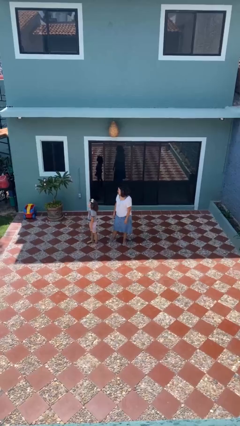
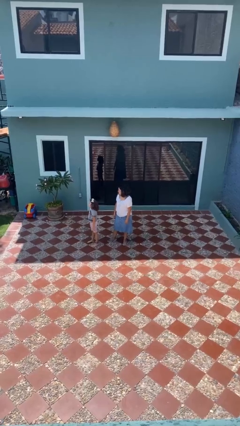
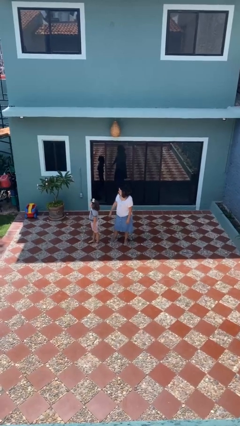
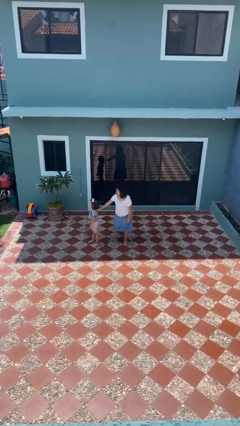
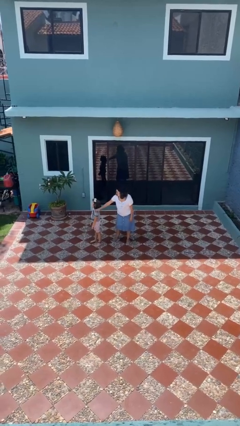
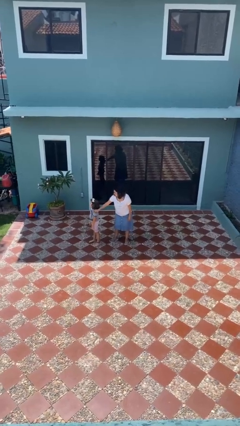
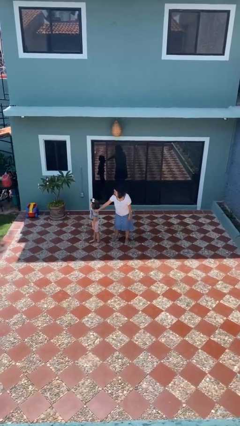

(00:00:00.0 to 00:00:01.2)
person grabs person by shoulder

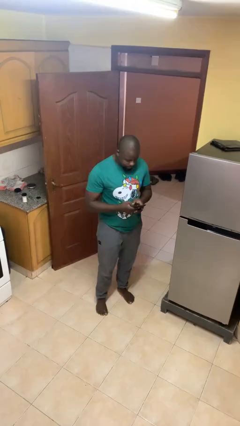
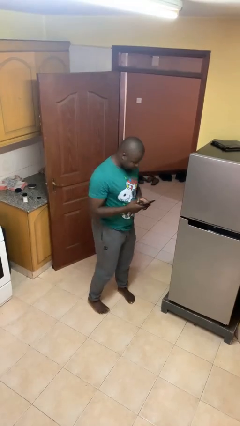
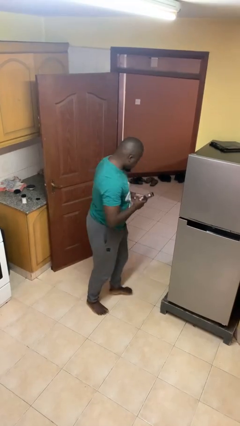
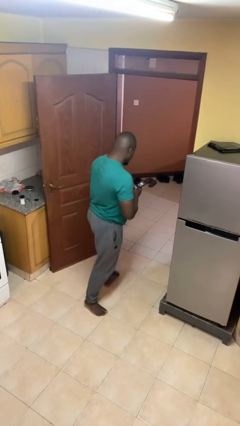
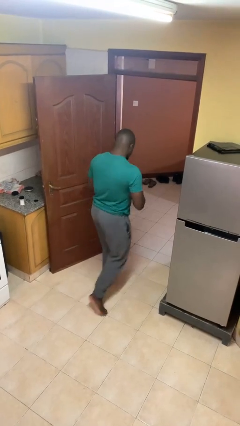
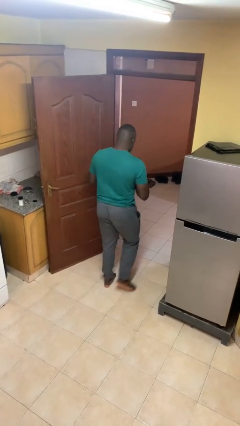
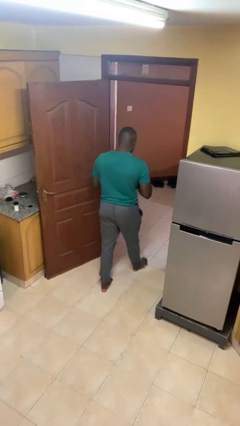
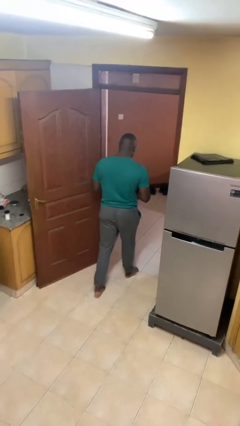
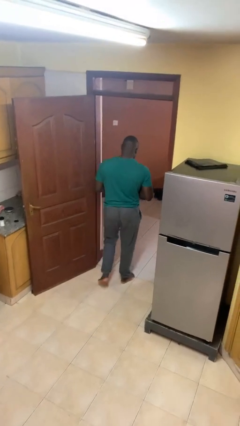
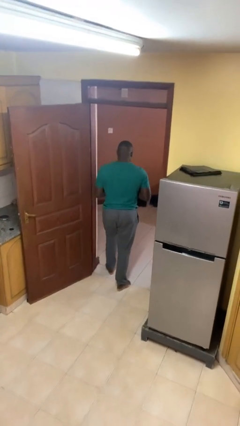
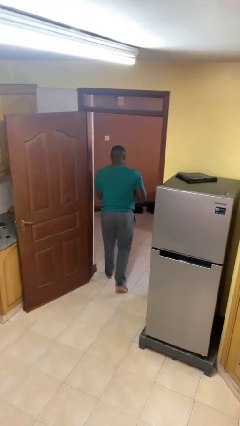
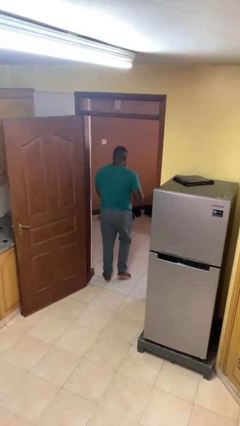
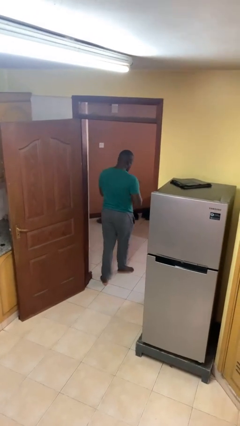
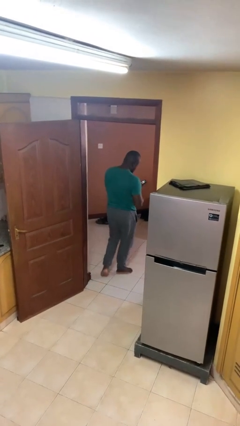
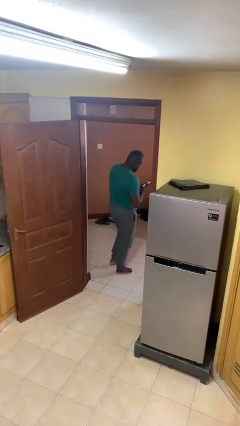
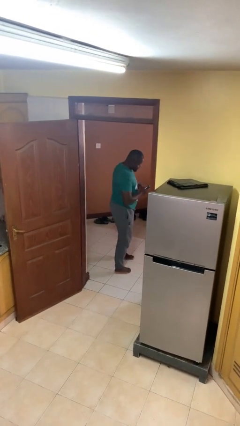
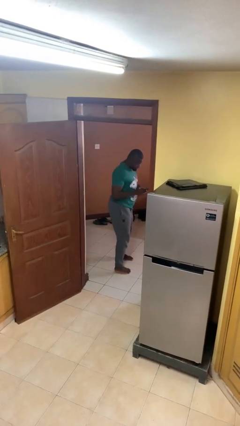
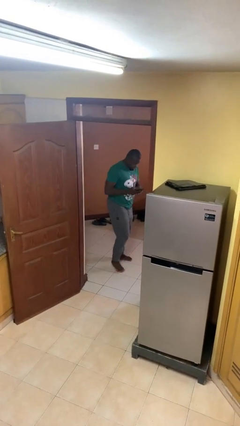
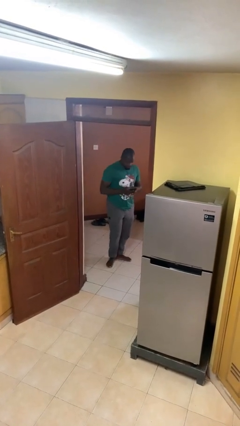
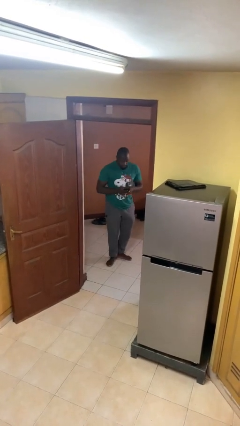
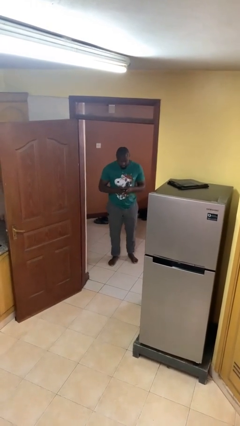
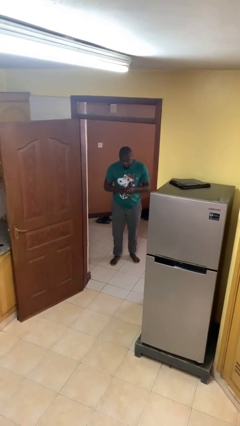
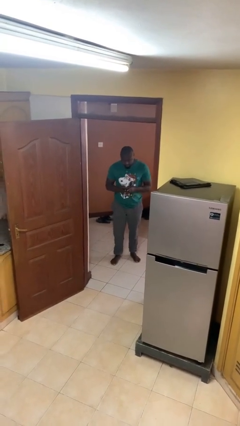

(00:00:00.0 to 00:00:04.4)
person exits scene through structure

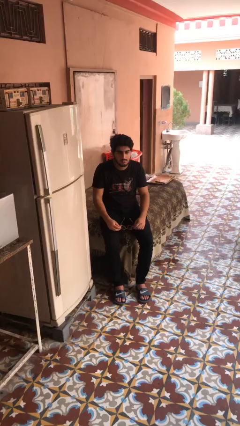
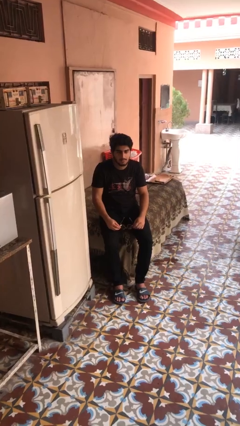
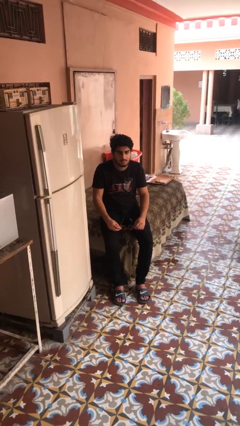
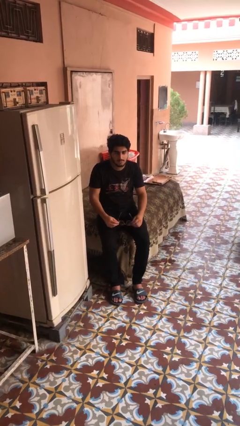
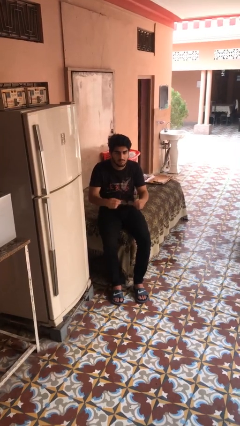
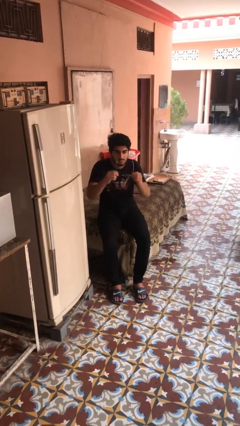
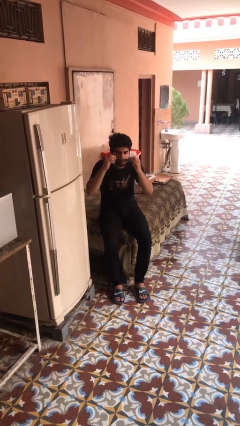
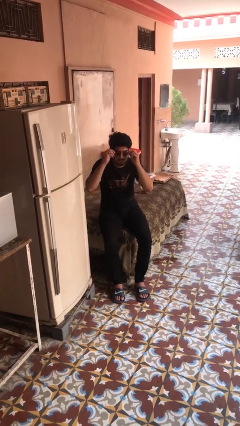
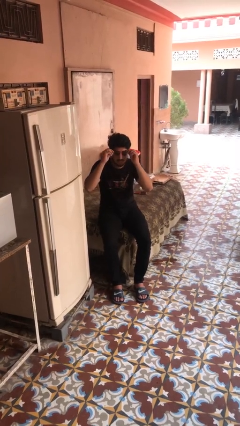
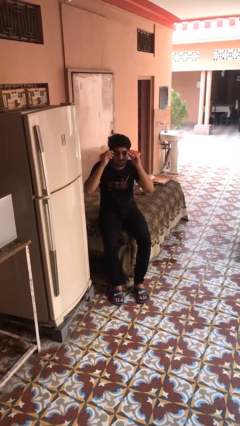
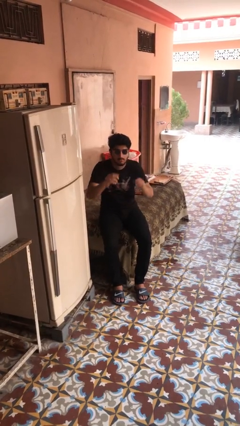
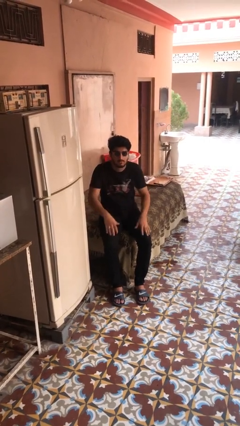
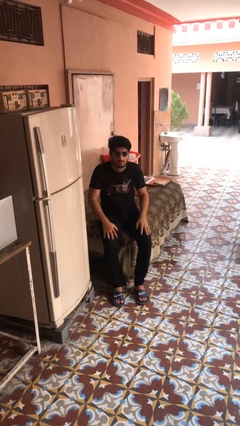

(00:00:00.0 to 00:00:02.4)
person puts on sunglasses

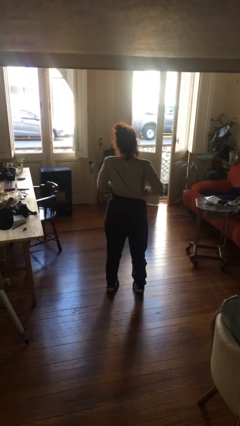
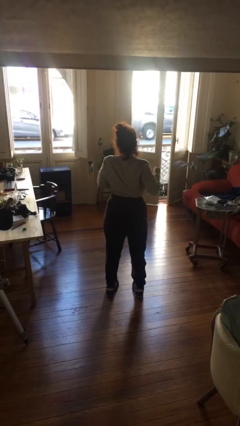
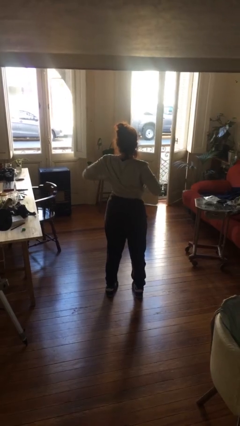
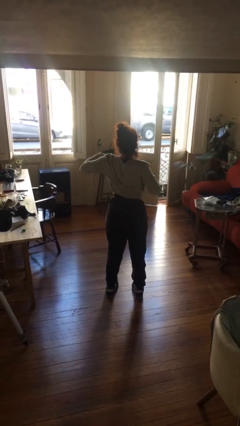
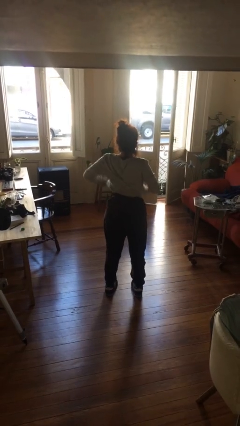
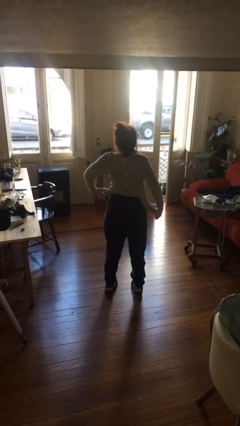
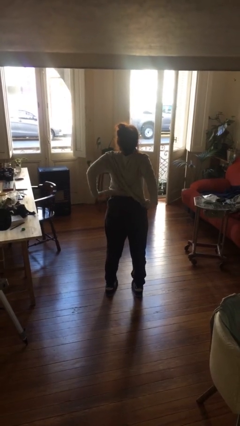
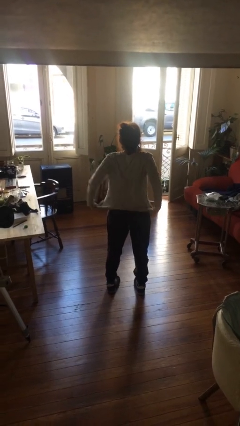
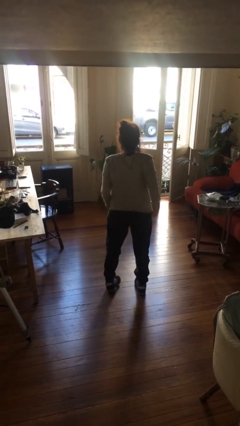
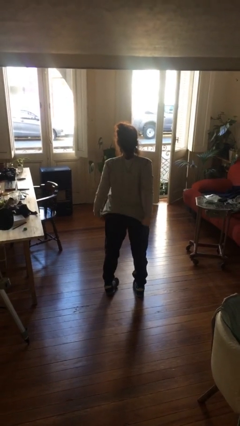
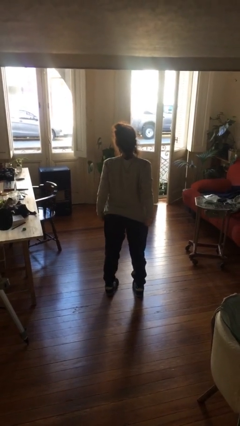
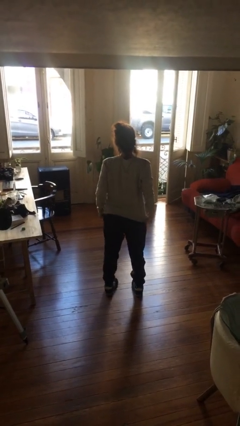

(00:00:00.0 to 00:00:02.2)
person untucks shirt

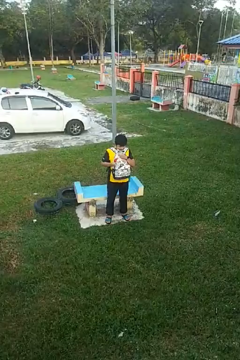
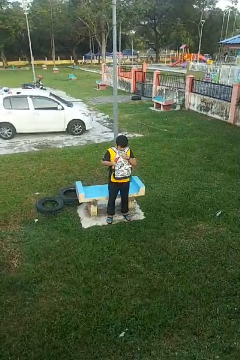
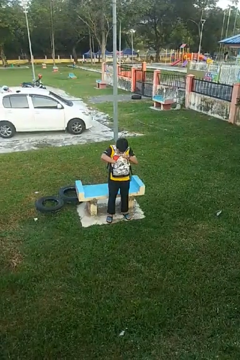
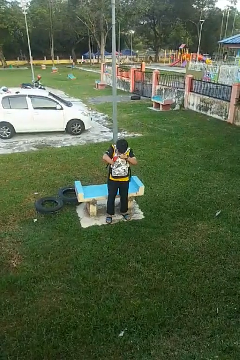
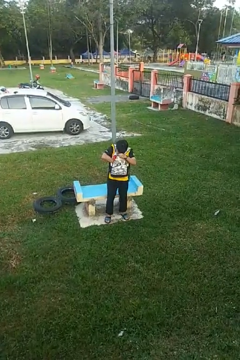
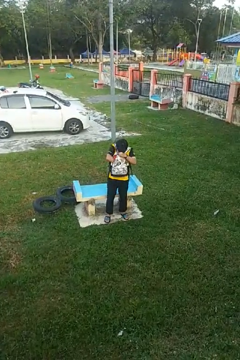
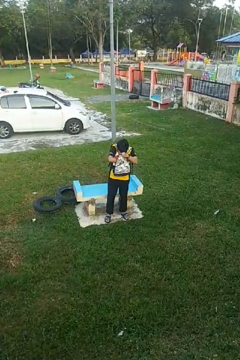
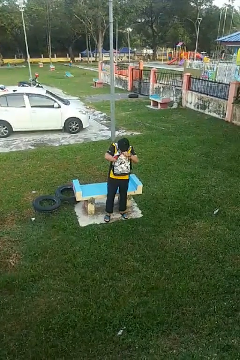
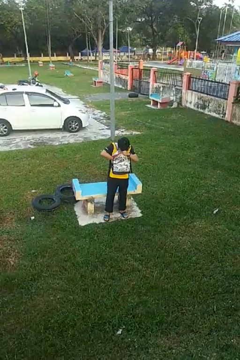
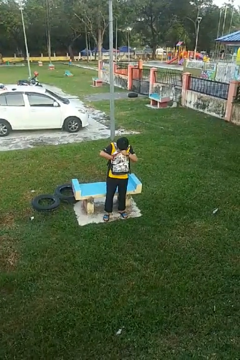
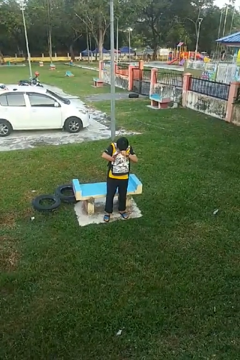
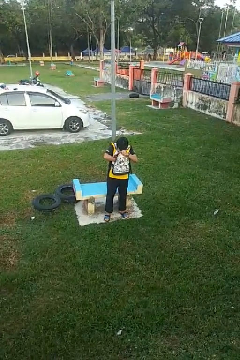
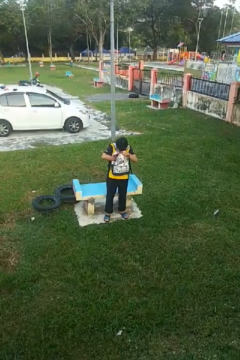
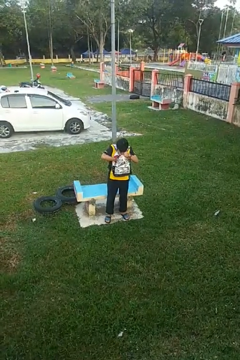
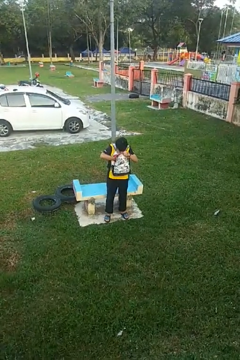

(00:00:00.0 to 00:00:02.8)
person searches in backpack

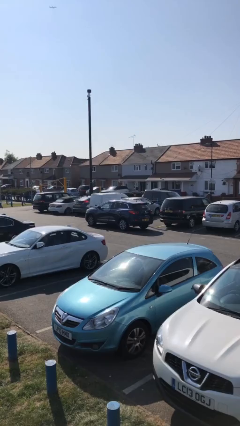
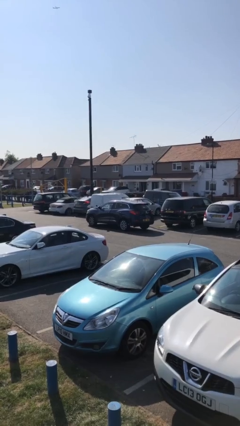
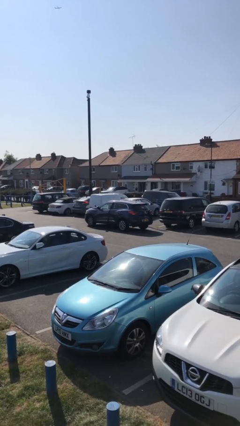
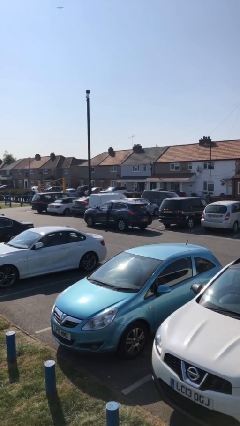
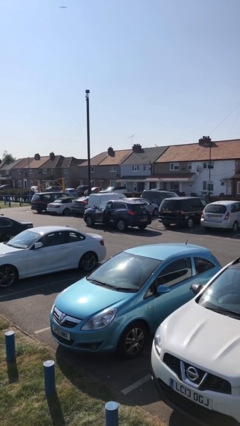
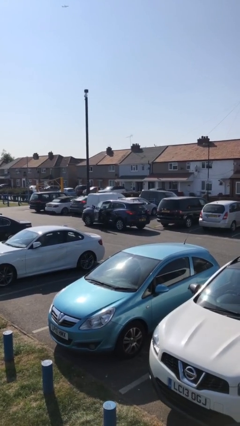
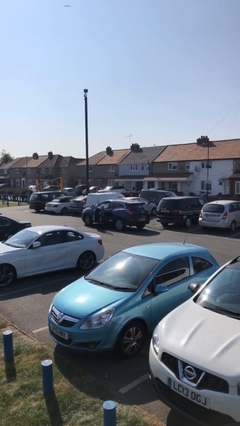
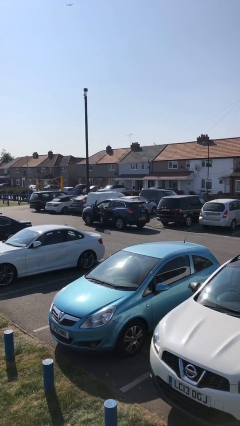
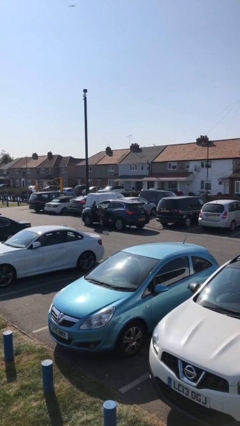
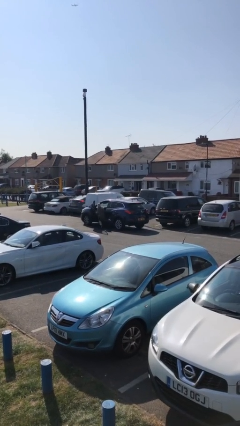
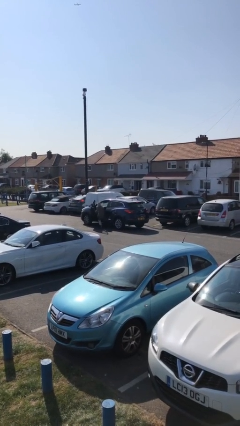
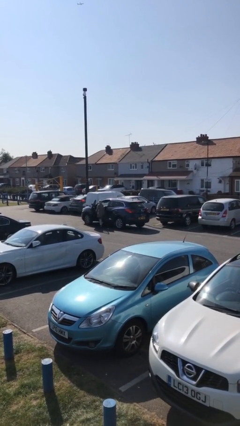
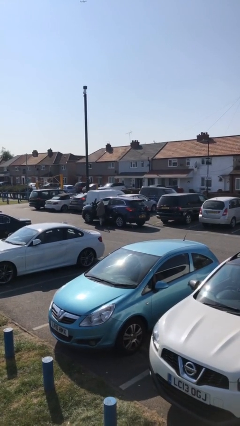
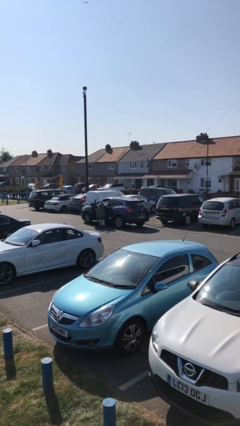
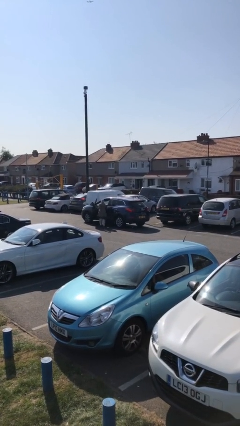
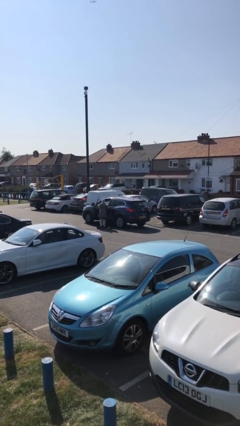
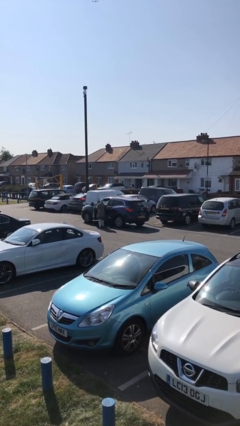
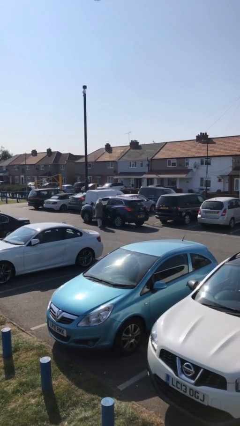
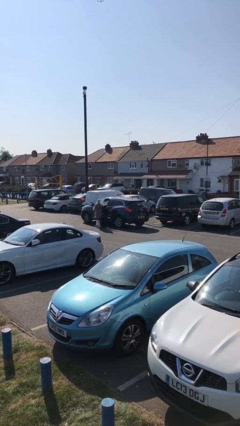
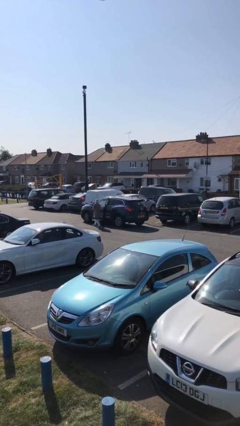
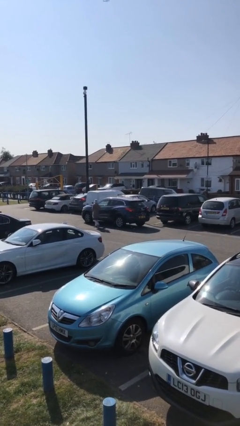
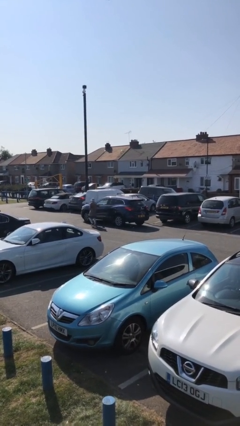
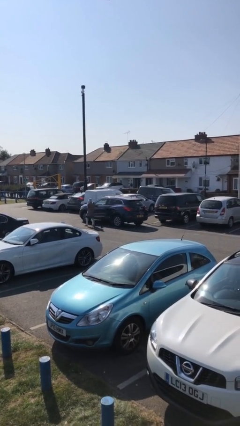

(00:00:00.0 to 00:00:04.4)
car drops off person

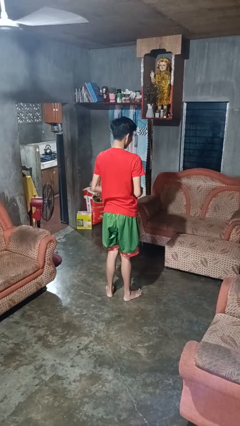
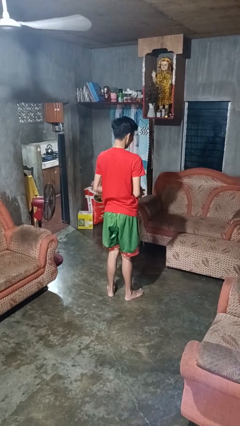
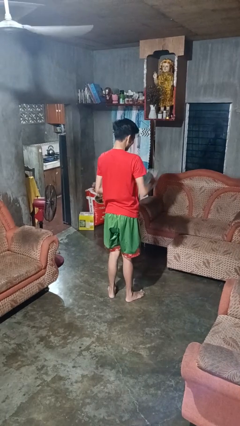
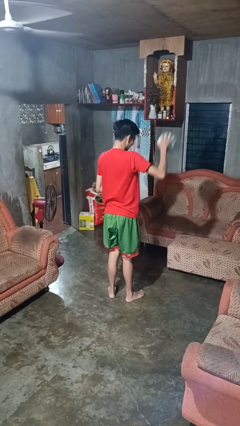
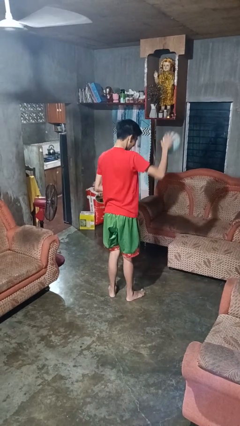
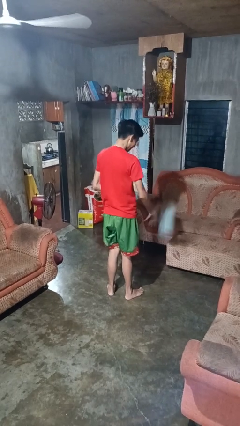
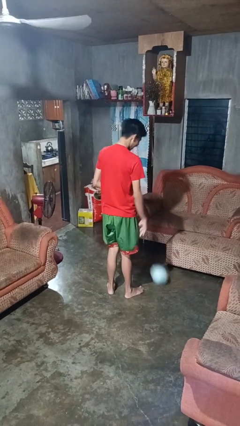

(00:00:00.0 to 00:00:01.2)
person bounces ball on floor
